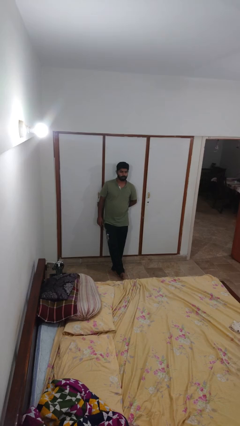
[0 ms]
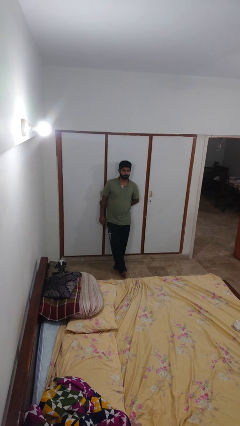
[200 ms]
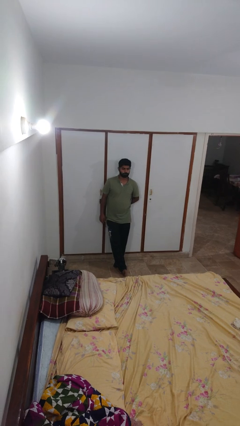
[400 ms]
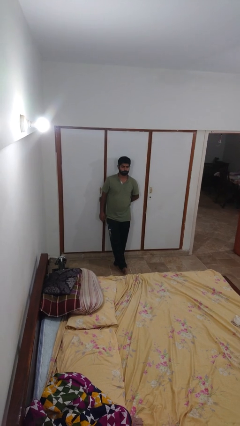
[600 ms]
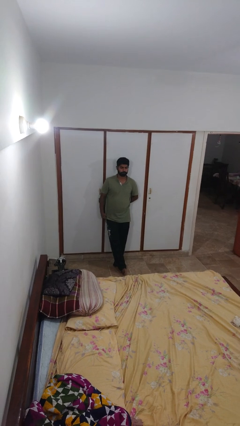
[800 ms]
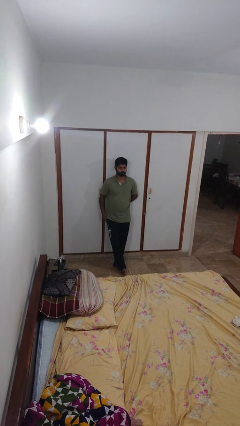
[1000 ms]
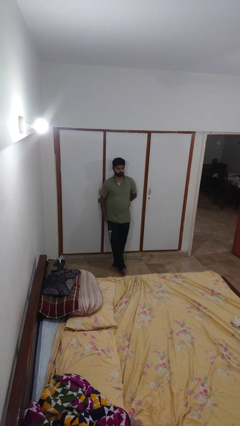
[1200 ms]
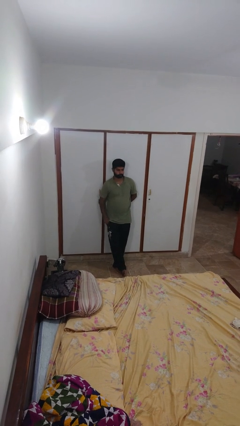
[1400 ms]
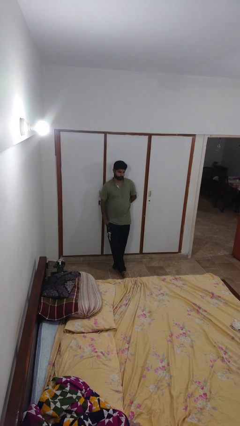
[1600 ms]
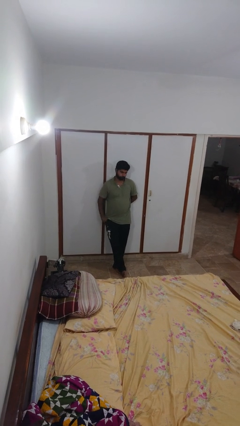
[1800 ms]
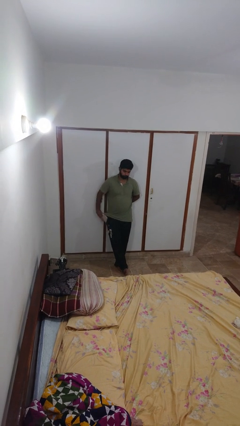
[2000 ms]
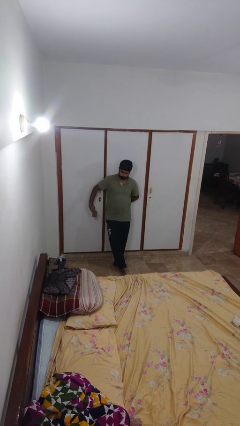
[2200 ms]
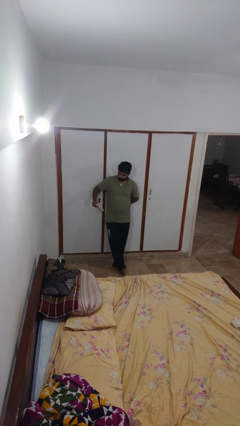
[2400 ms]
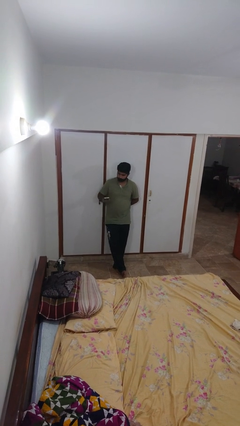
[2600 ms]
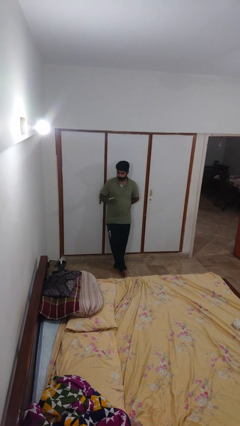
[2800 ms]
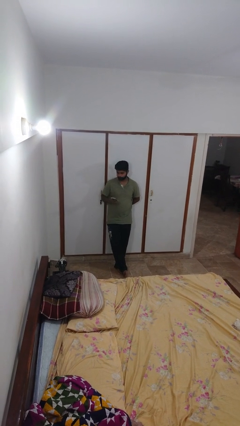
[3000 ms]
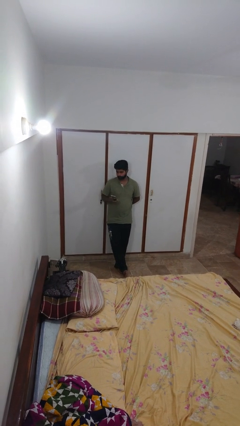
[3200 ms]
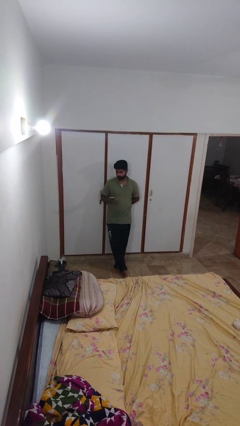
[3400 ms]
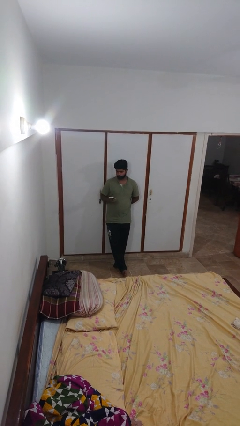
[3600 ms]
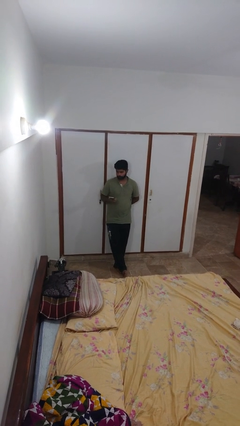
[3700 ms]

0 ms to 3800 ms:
person takes phone from pocket

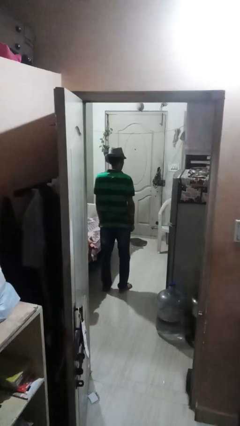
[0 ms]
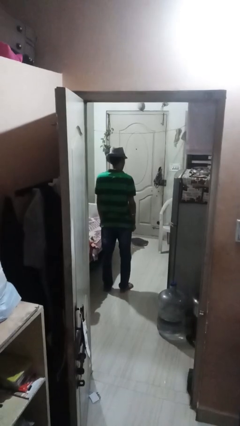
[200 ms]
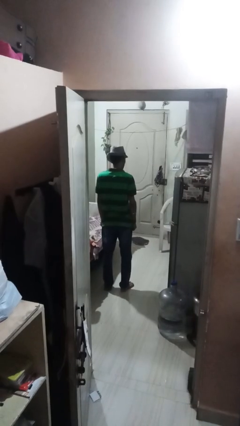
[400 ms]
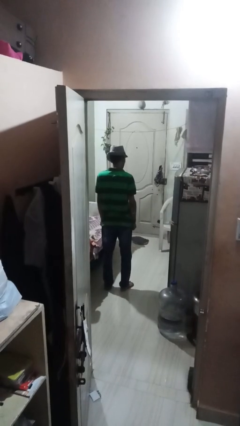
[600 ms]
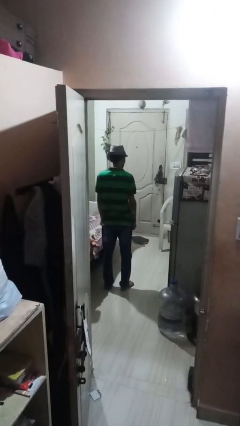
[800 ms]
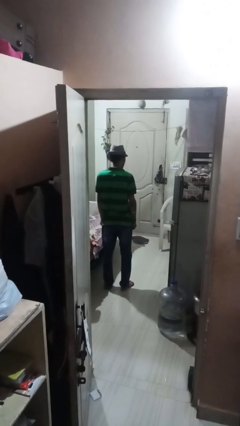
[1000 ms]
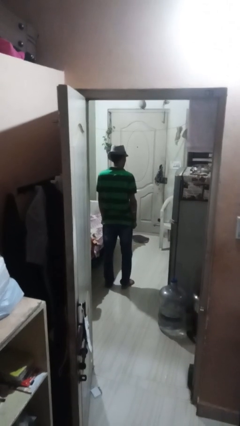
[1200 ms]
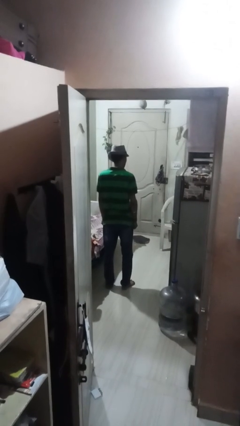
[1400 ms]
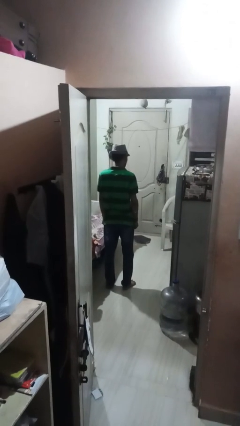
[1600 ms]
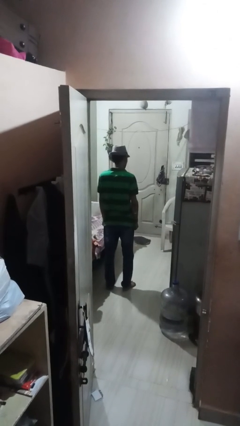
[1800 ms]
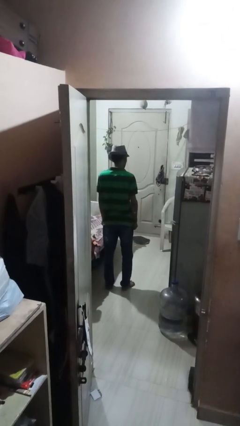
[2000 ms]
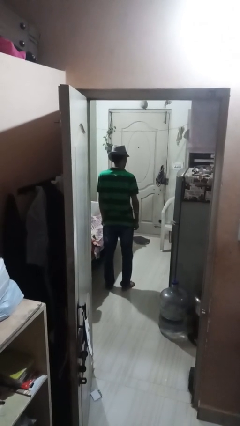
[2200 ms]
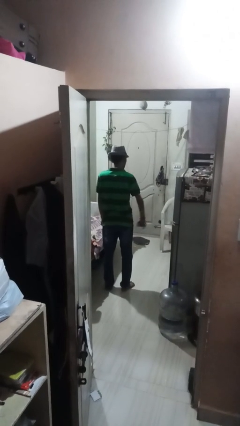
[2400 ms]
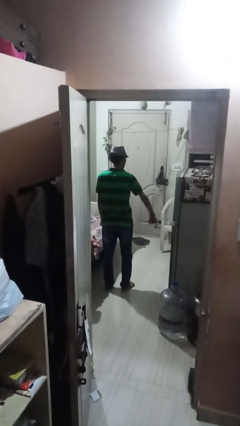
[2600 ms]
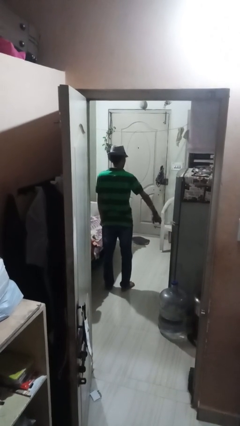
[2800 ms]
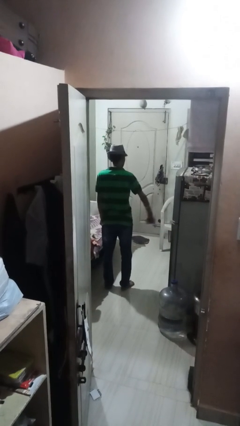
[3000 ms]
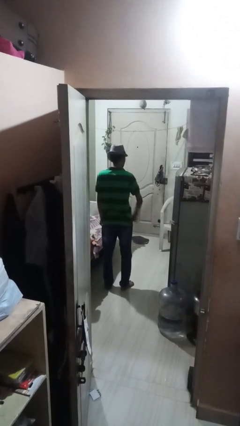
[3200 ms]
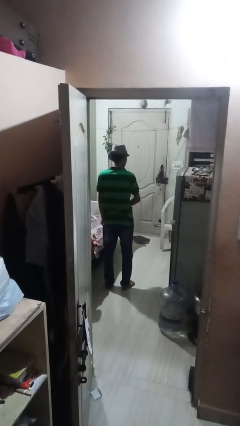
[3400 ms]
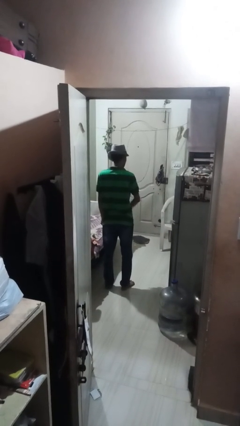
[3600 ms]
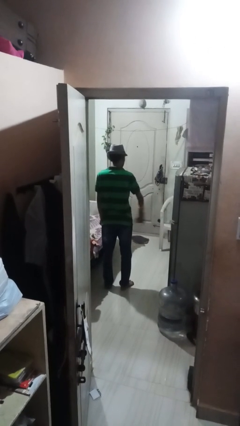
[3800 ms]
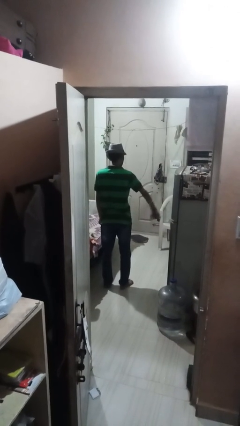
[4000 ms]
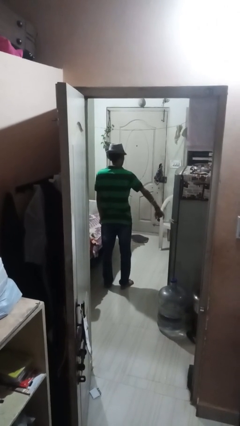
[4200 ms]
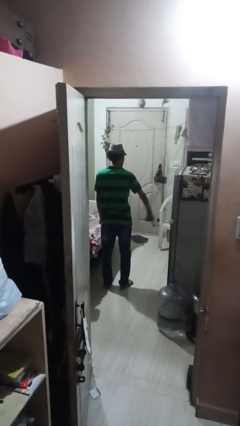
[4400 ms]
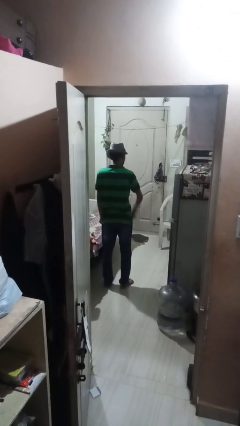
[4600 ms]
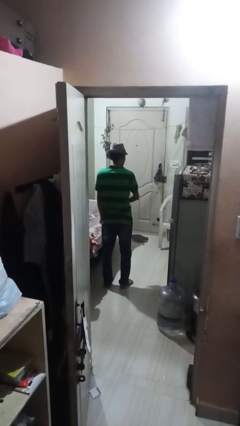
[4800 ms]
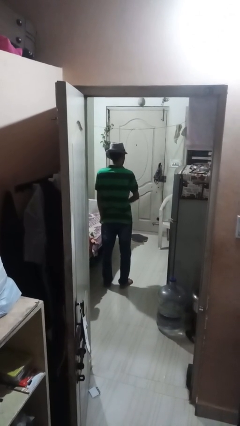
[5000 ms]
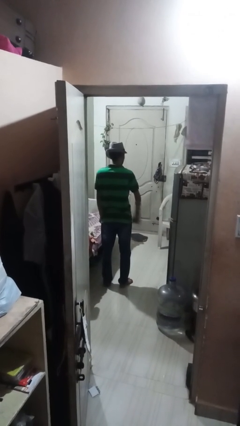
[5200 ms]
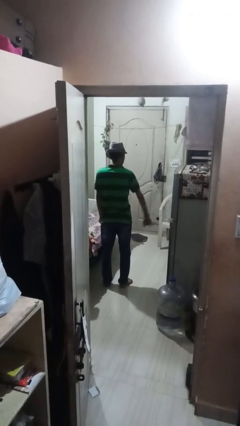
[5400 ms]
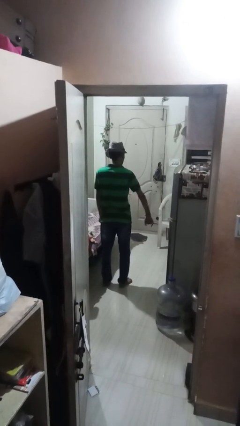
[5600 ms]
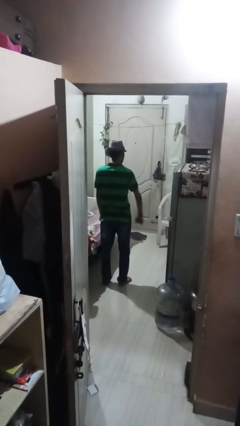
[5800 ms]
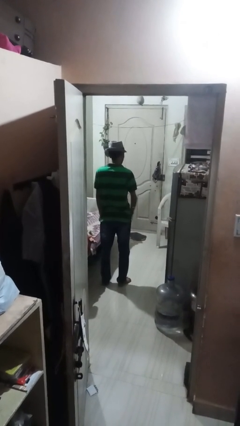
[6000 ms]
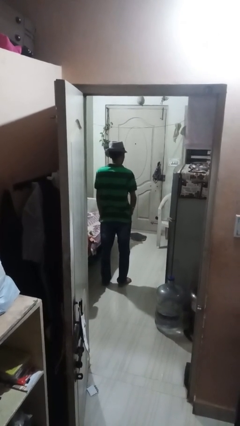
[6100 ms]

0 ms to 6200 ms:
person gestures hang loose

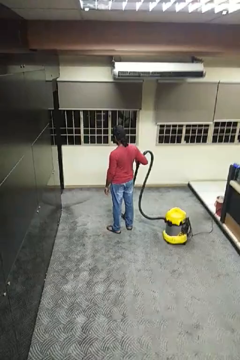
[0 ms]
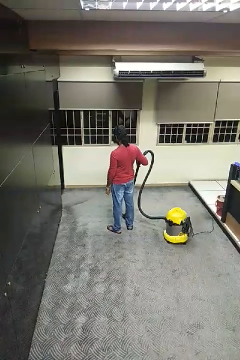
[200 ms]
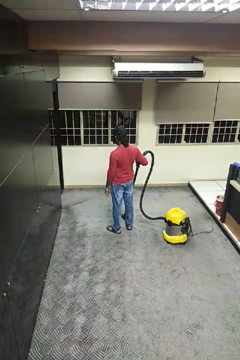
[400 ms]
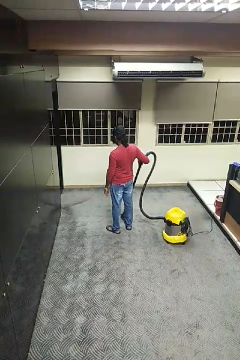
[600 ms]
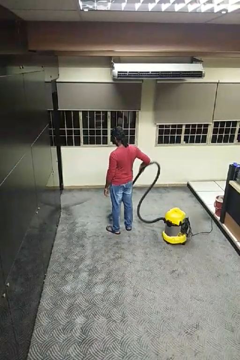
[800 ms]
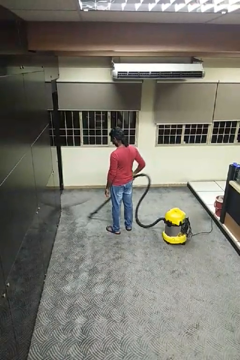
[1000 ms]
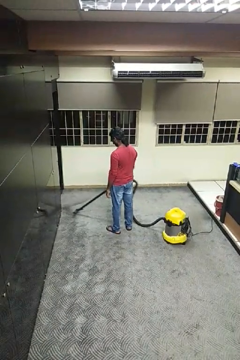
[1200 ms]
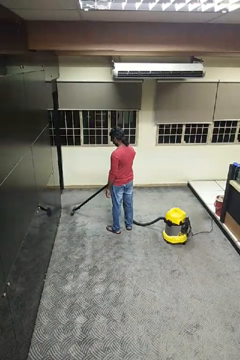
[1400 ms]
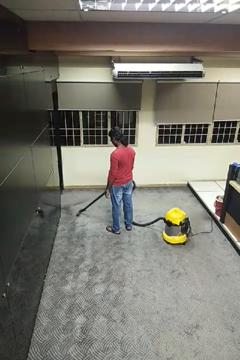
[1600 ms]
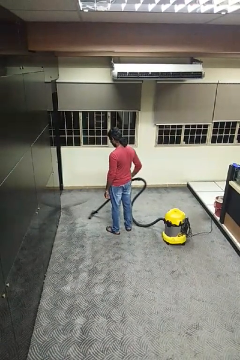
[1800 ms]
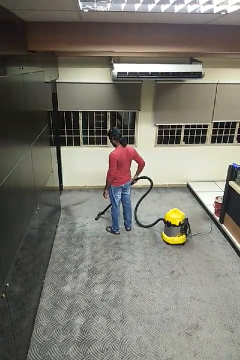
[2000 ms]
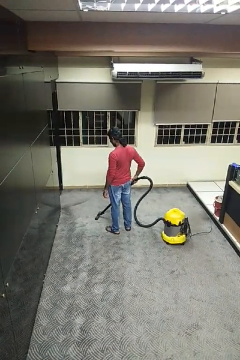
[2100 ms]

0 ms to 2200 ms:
person vacuums carpet

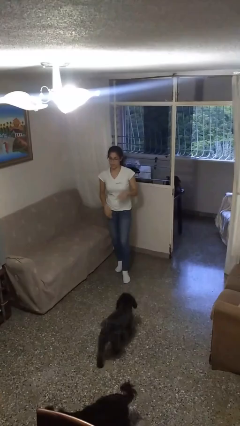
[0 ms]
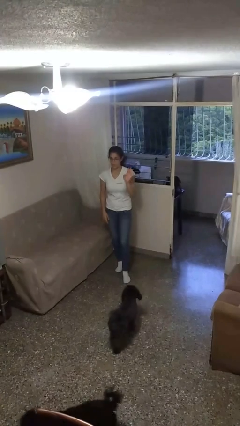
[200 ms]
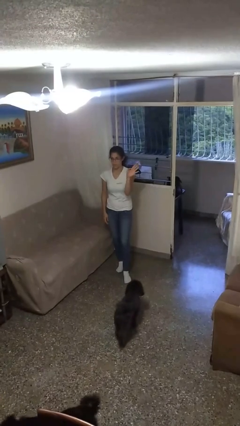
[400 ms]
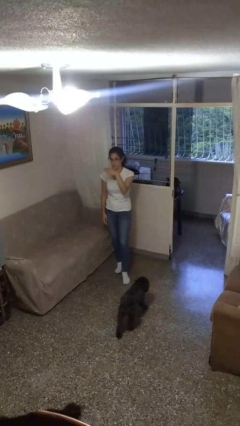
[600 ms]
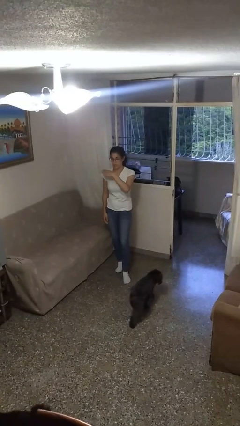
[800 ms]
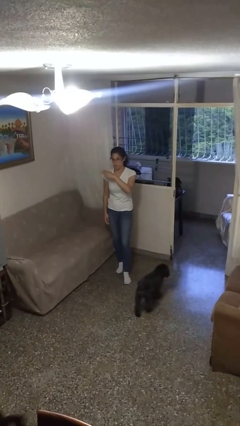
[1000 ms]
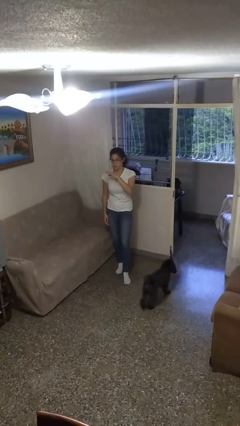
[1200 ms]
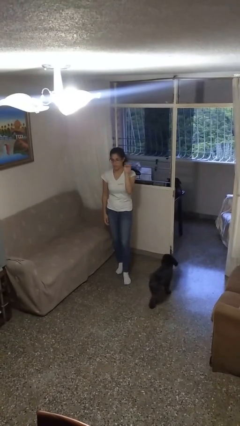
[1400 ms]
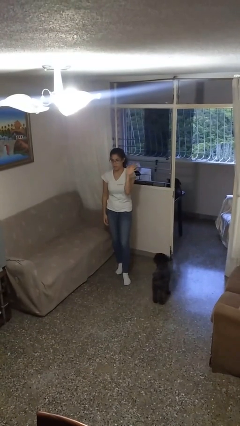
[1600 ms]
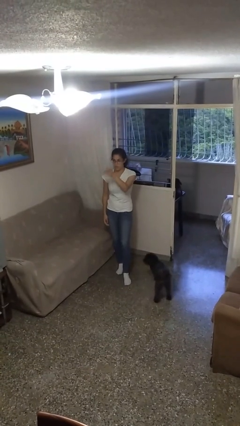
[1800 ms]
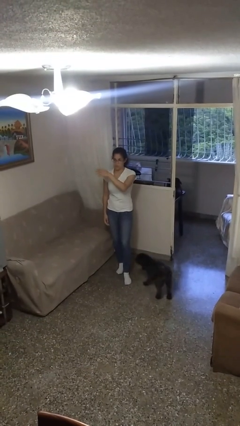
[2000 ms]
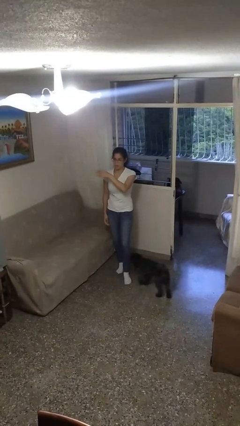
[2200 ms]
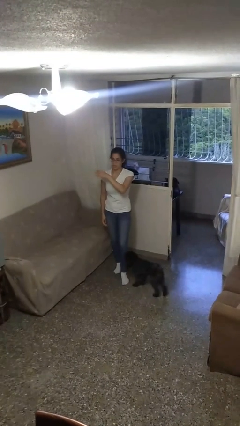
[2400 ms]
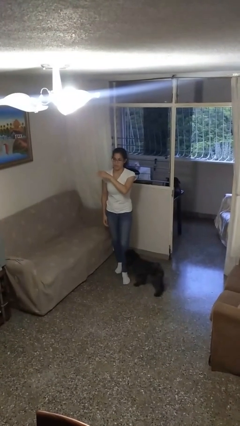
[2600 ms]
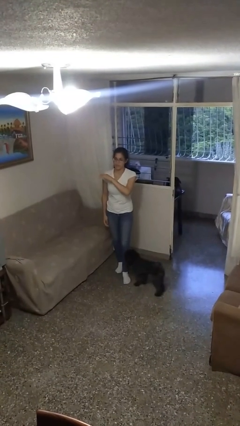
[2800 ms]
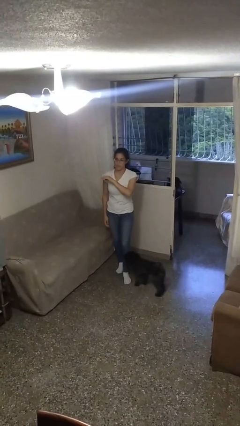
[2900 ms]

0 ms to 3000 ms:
person gestures swipe right

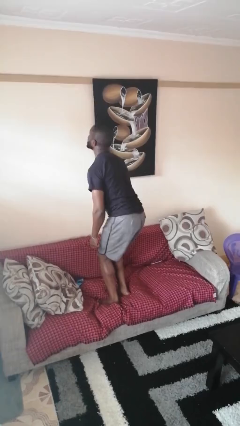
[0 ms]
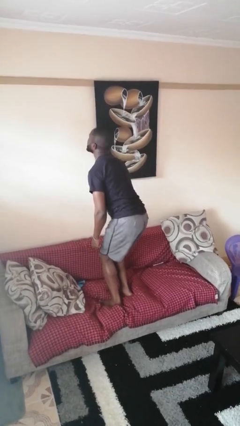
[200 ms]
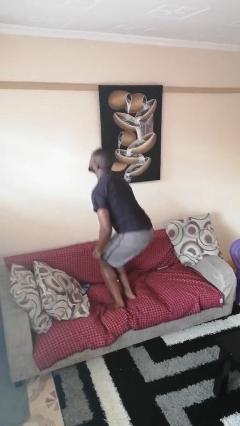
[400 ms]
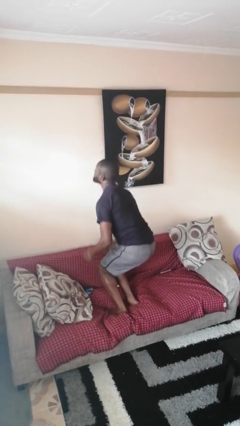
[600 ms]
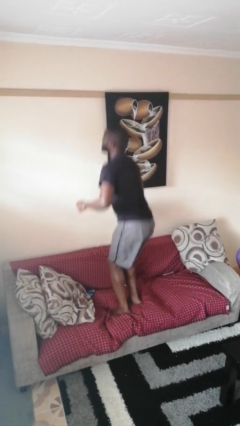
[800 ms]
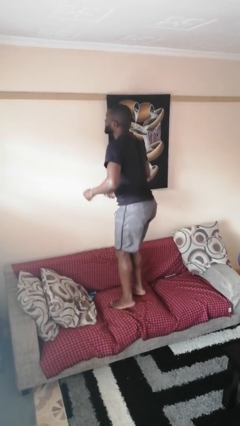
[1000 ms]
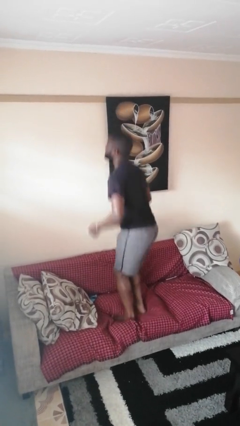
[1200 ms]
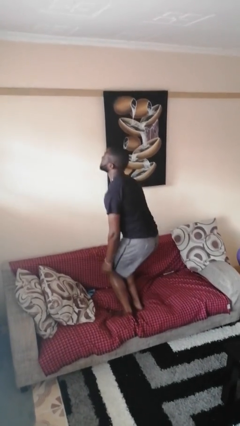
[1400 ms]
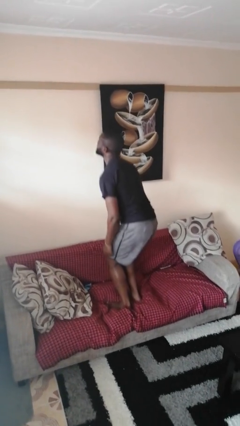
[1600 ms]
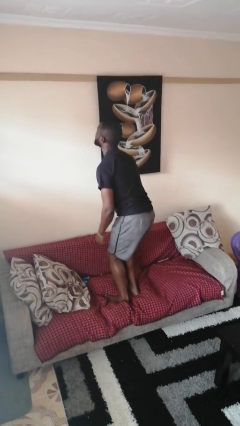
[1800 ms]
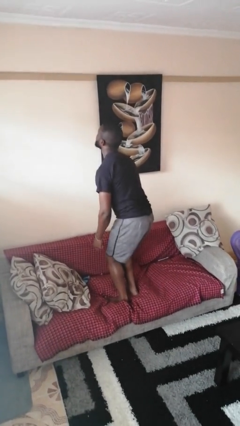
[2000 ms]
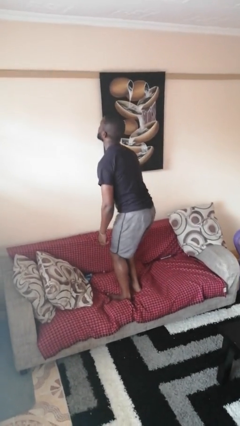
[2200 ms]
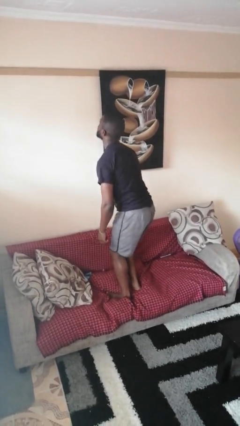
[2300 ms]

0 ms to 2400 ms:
person jumps on couch

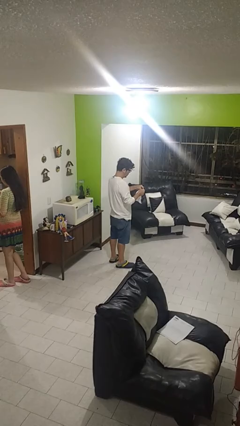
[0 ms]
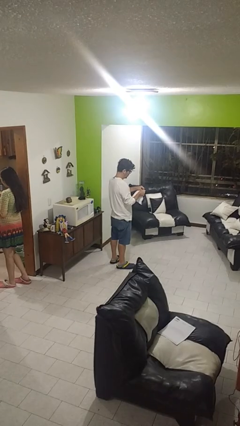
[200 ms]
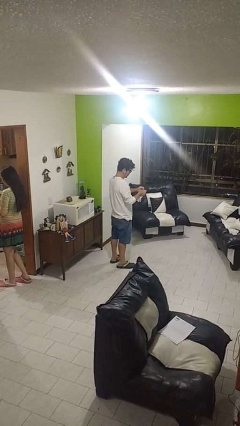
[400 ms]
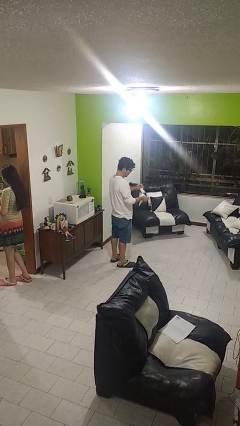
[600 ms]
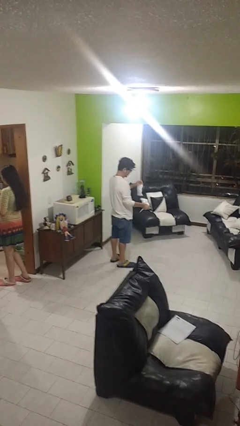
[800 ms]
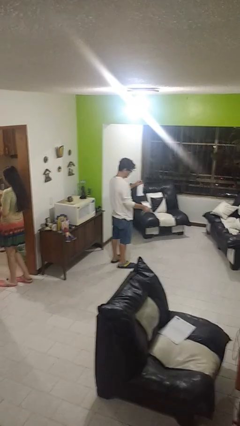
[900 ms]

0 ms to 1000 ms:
person tears paper
